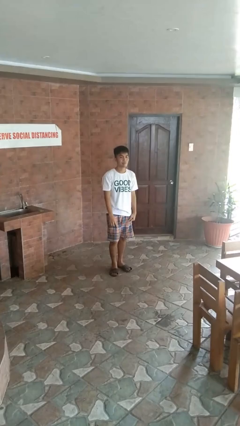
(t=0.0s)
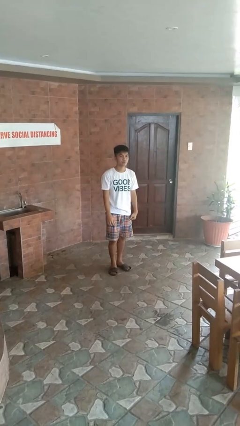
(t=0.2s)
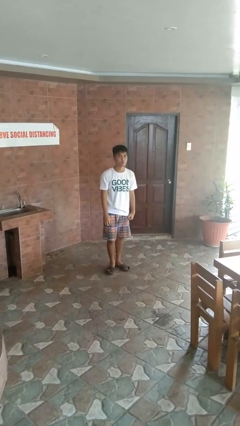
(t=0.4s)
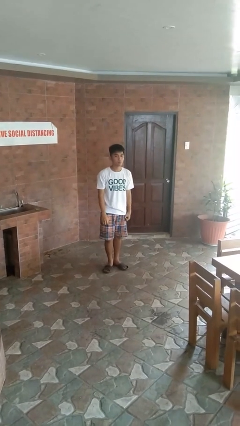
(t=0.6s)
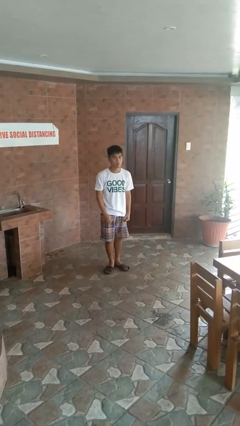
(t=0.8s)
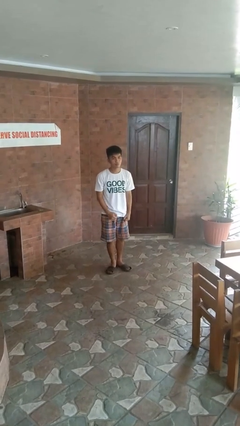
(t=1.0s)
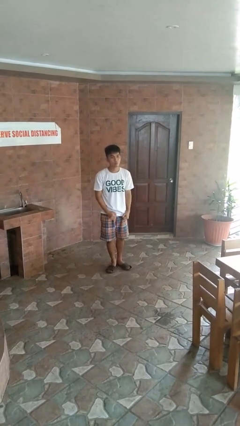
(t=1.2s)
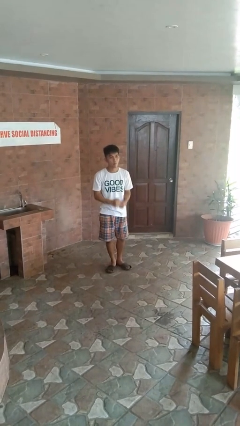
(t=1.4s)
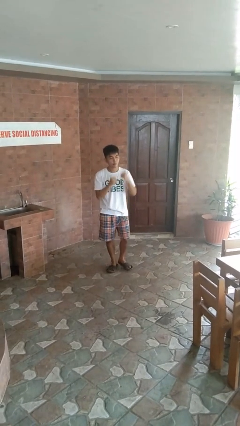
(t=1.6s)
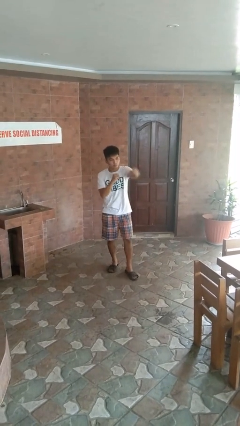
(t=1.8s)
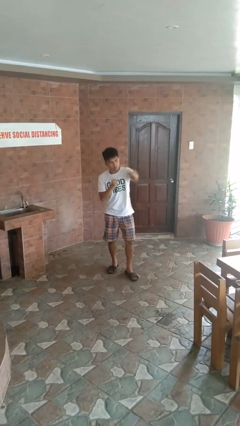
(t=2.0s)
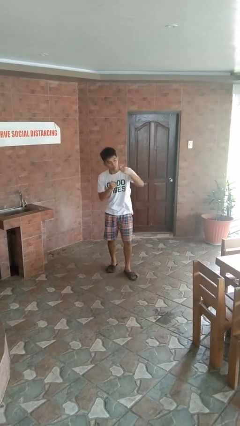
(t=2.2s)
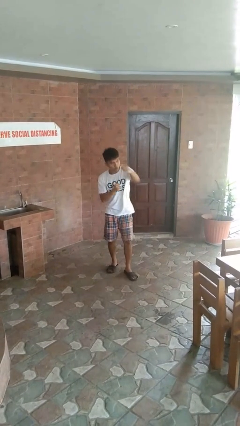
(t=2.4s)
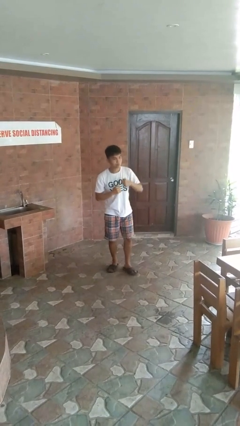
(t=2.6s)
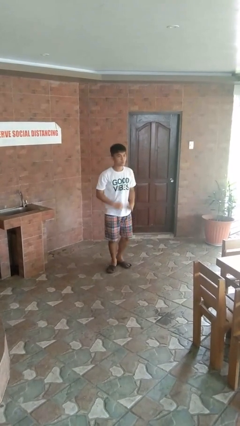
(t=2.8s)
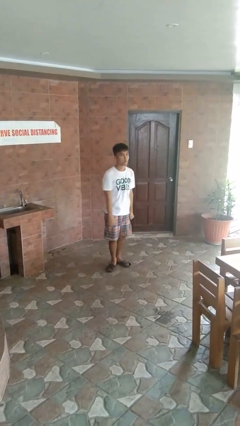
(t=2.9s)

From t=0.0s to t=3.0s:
person punches

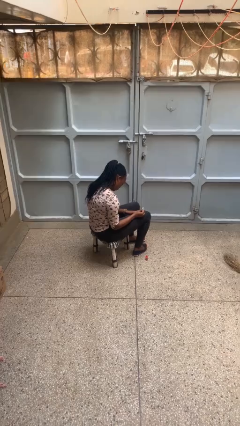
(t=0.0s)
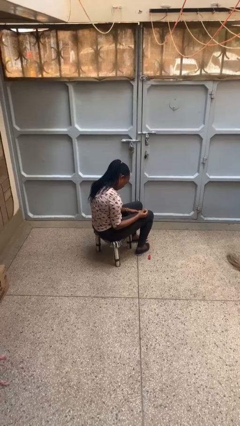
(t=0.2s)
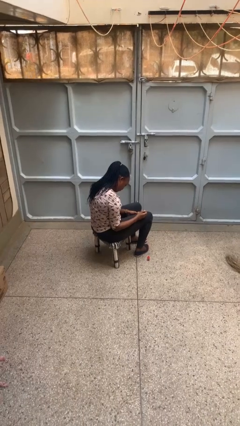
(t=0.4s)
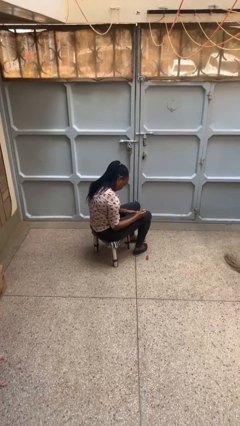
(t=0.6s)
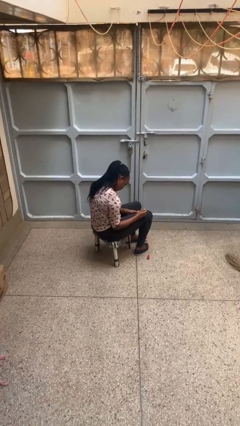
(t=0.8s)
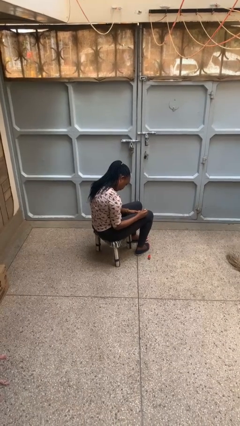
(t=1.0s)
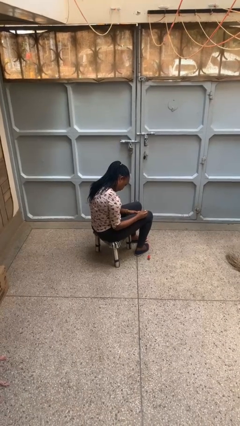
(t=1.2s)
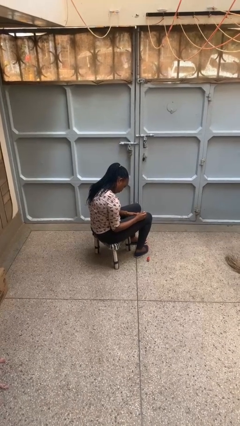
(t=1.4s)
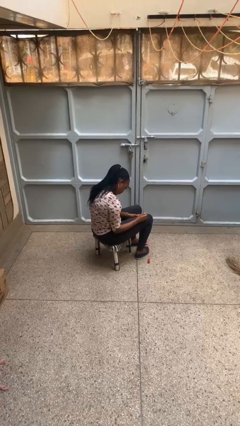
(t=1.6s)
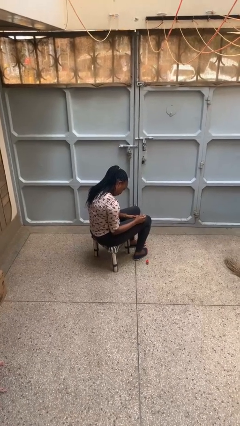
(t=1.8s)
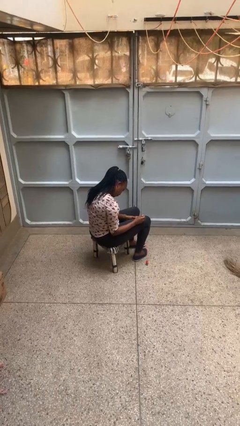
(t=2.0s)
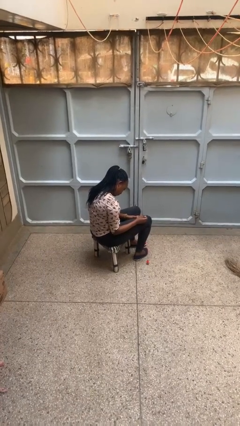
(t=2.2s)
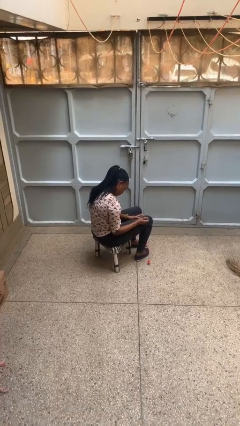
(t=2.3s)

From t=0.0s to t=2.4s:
person paints fingernails

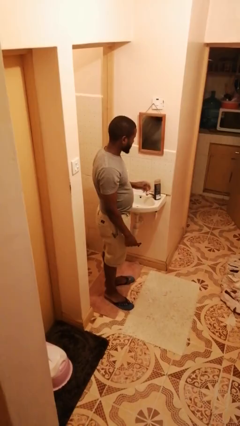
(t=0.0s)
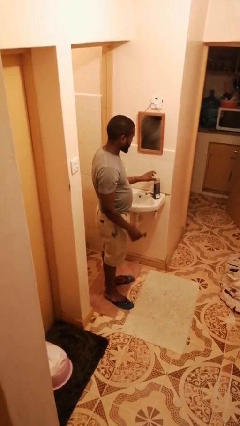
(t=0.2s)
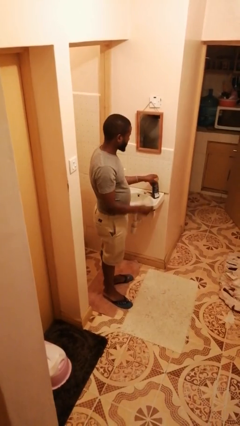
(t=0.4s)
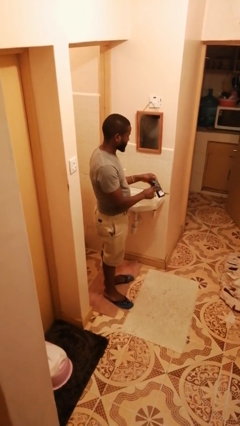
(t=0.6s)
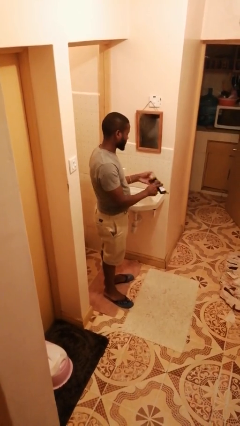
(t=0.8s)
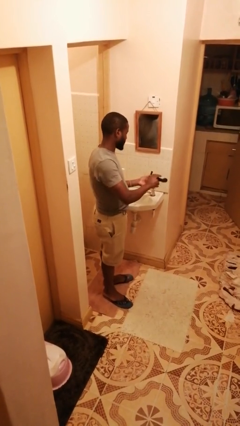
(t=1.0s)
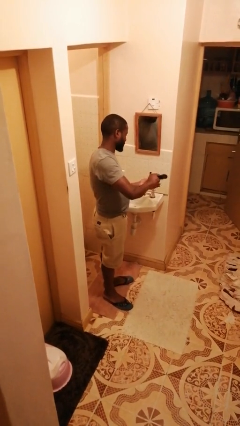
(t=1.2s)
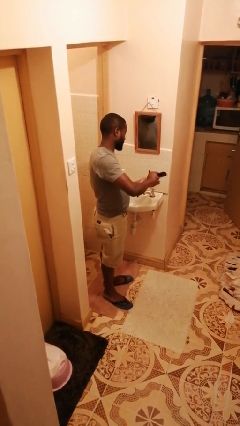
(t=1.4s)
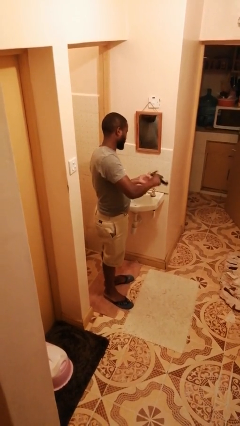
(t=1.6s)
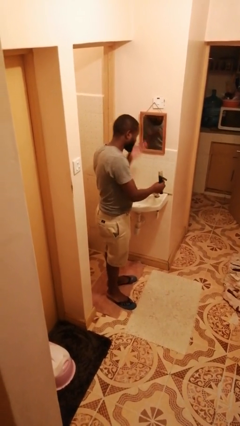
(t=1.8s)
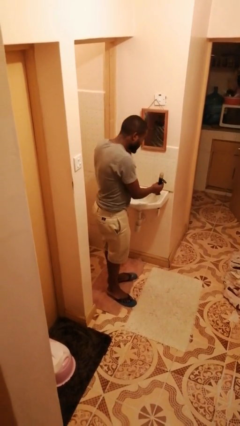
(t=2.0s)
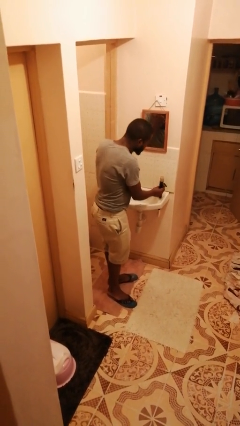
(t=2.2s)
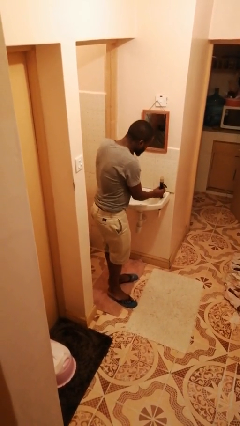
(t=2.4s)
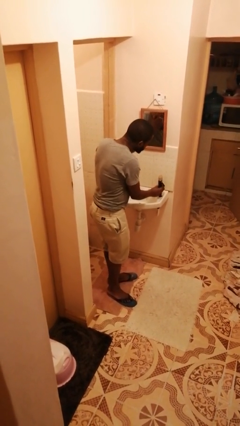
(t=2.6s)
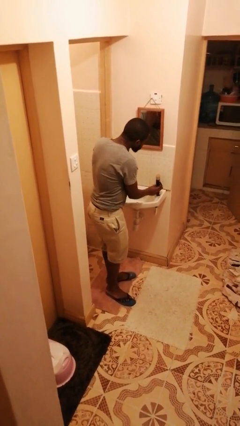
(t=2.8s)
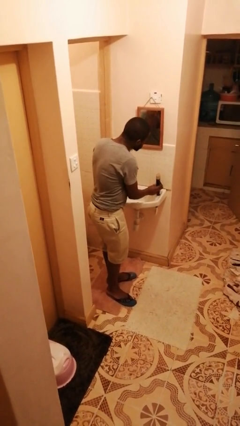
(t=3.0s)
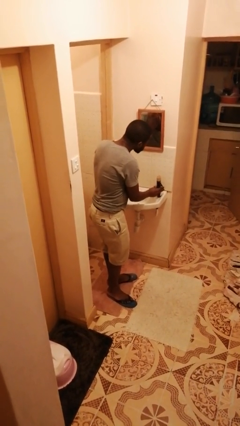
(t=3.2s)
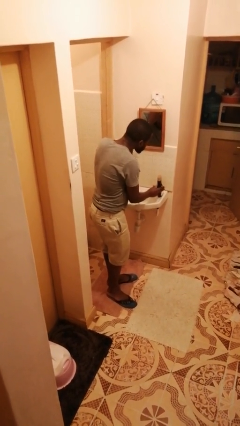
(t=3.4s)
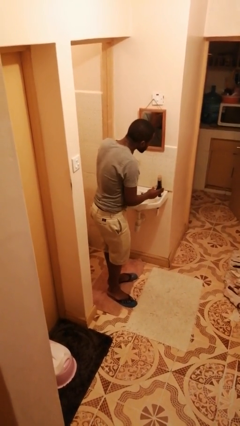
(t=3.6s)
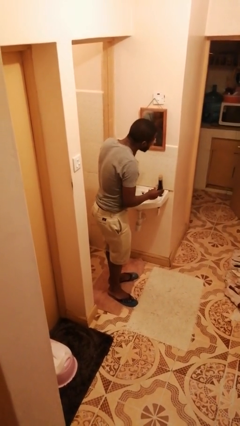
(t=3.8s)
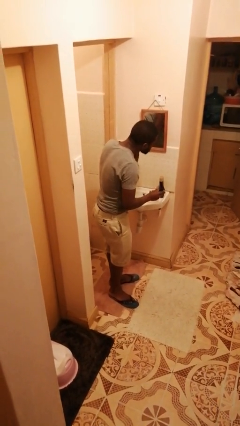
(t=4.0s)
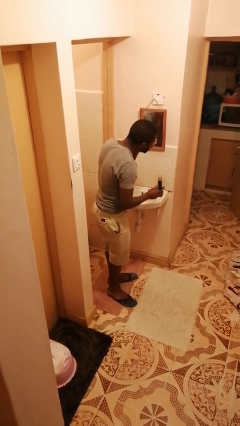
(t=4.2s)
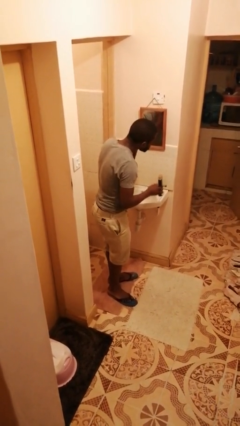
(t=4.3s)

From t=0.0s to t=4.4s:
person applies shaving cream

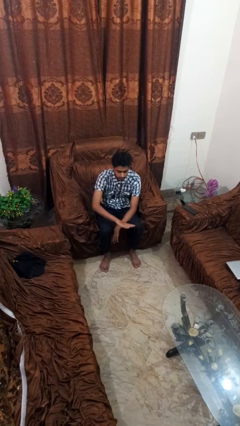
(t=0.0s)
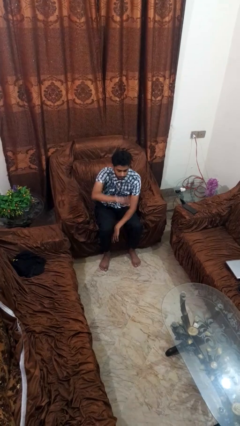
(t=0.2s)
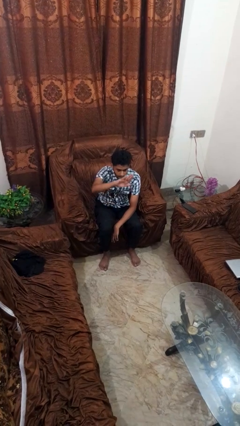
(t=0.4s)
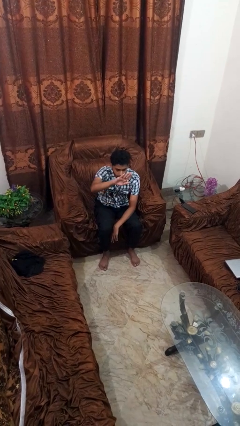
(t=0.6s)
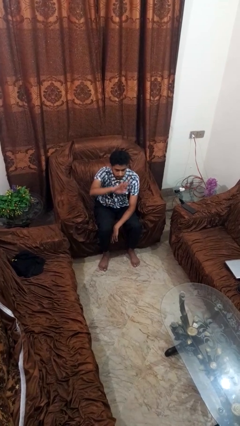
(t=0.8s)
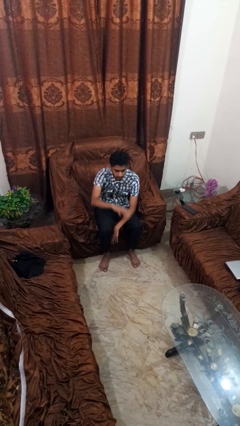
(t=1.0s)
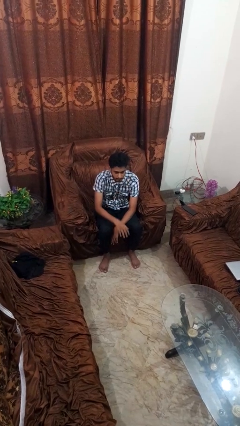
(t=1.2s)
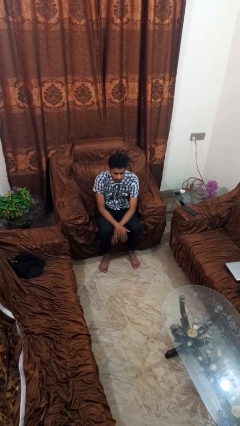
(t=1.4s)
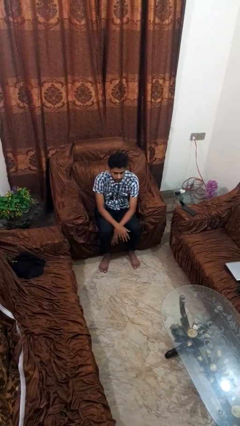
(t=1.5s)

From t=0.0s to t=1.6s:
person gestures swipe up

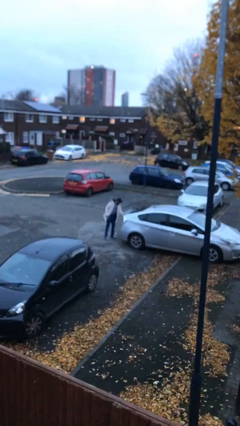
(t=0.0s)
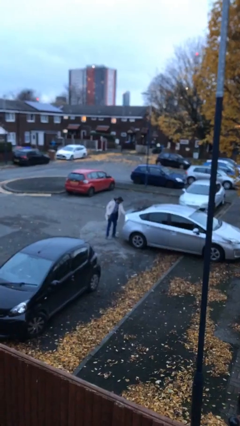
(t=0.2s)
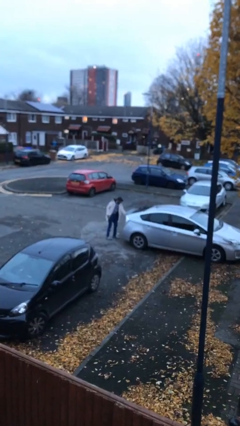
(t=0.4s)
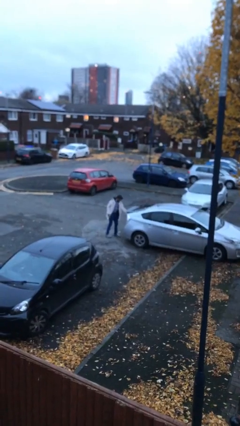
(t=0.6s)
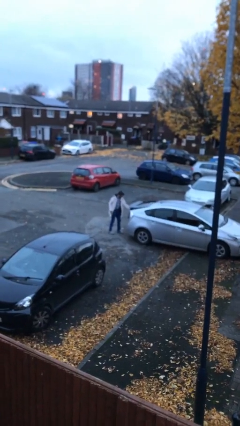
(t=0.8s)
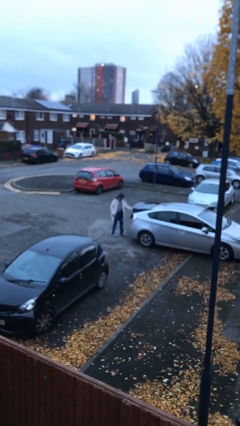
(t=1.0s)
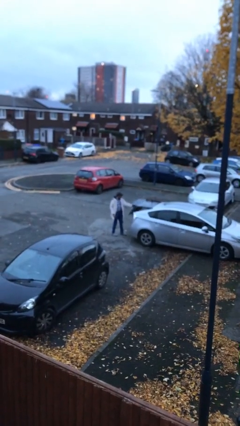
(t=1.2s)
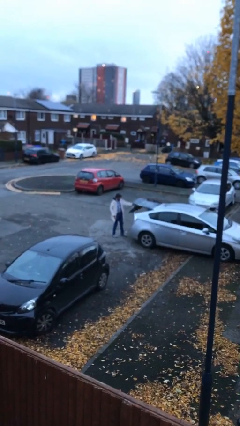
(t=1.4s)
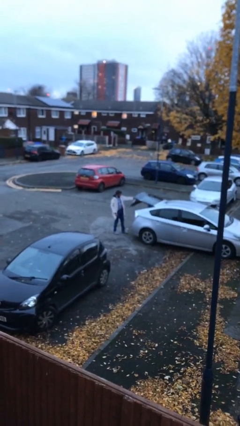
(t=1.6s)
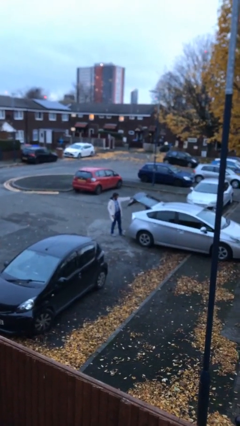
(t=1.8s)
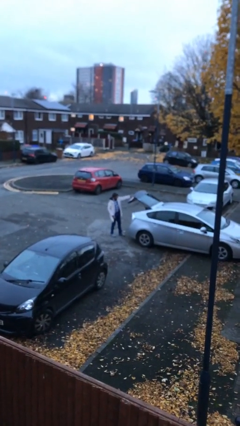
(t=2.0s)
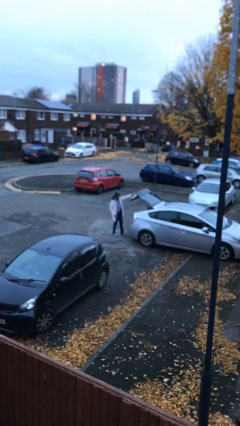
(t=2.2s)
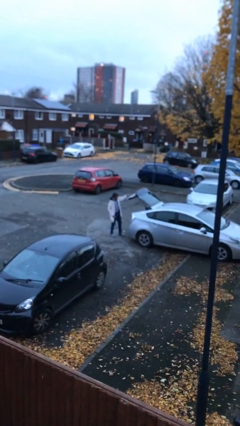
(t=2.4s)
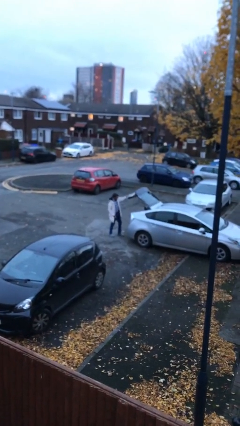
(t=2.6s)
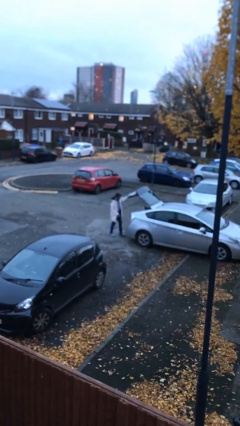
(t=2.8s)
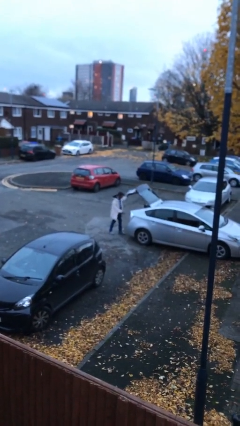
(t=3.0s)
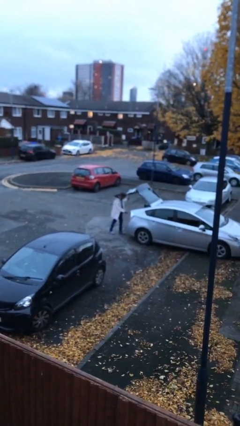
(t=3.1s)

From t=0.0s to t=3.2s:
person opens car trunk

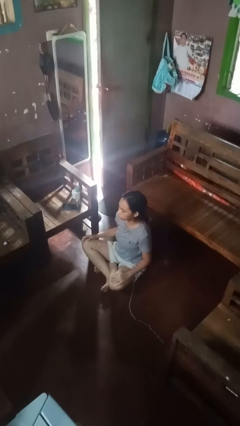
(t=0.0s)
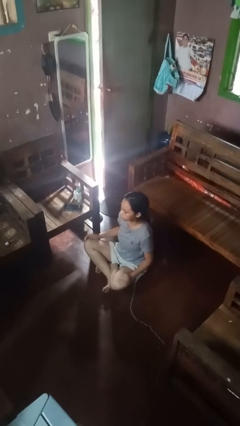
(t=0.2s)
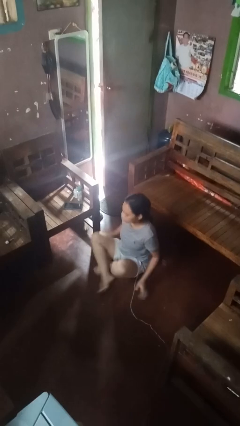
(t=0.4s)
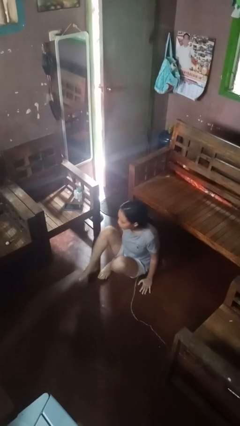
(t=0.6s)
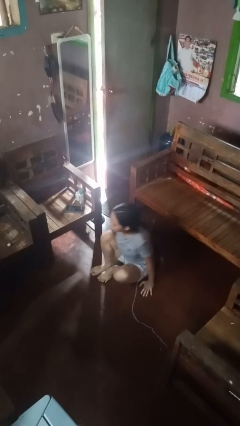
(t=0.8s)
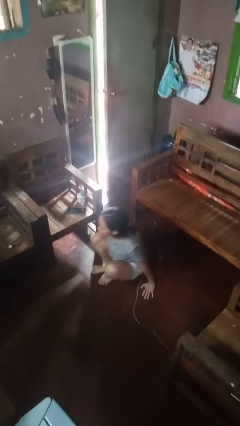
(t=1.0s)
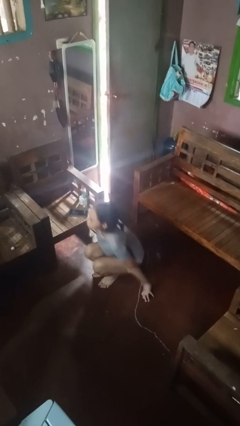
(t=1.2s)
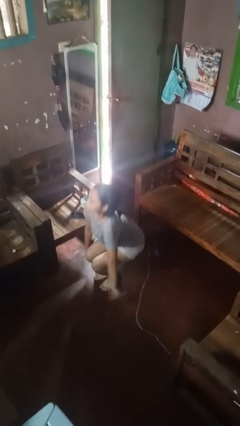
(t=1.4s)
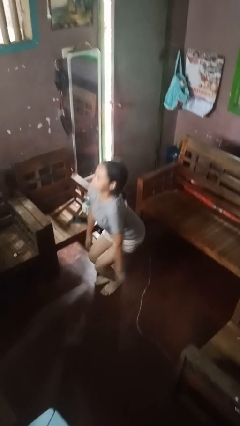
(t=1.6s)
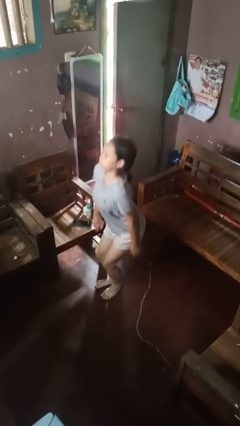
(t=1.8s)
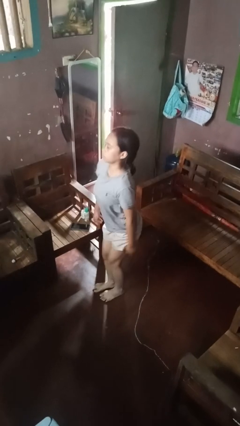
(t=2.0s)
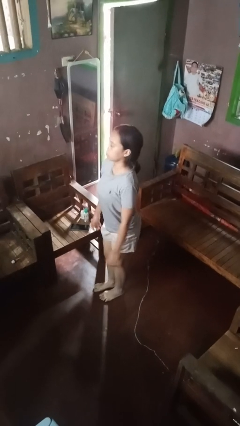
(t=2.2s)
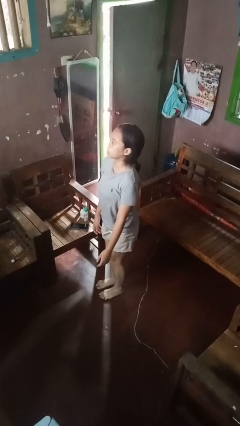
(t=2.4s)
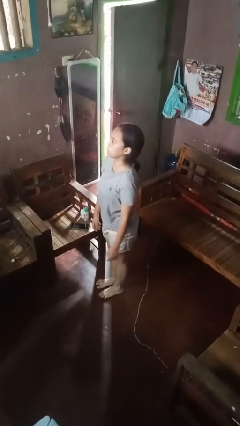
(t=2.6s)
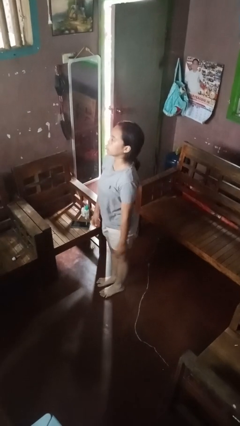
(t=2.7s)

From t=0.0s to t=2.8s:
person stands up from floor
